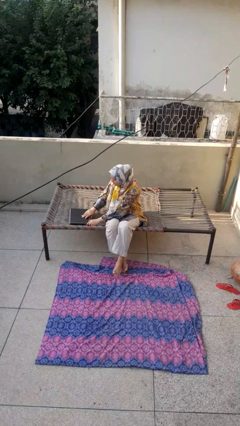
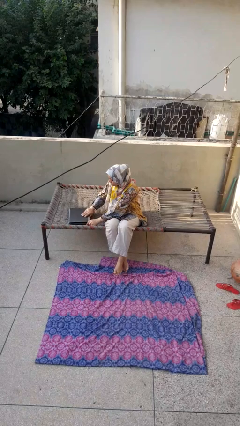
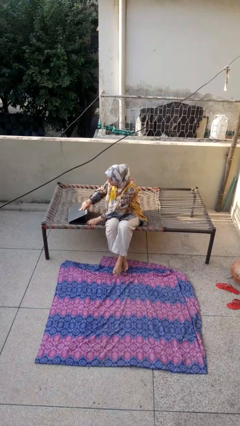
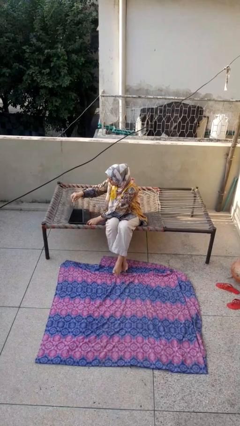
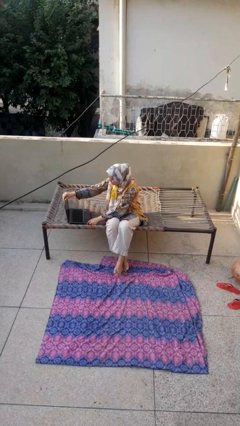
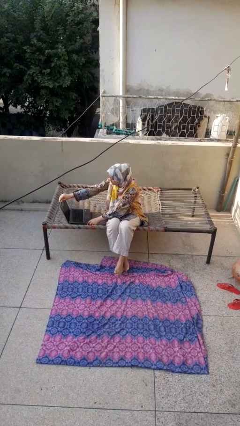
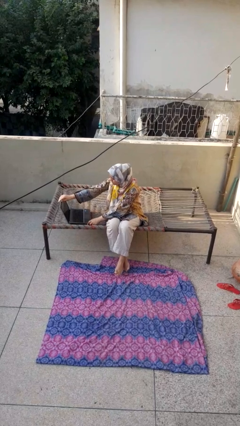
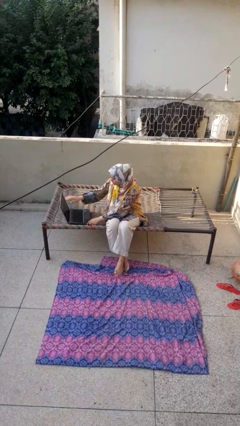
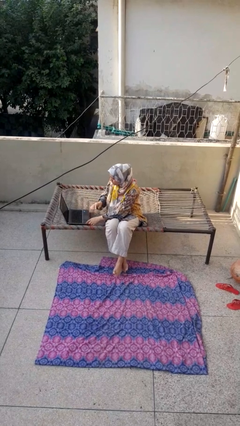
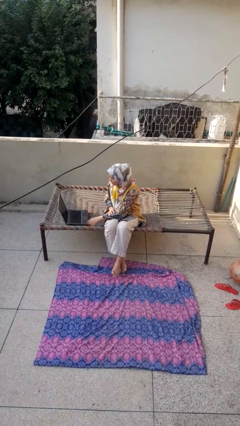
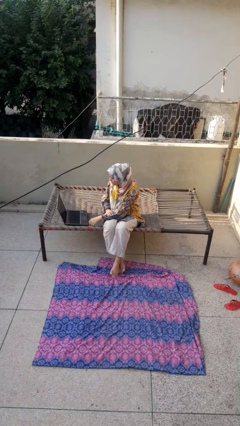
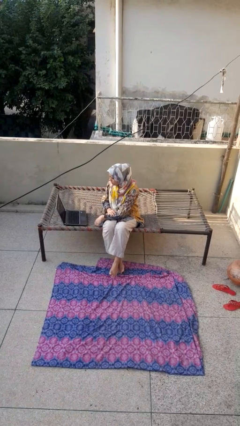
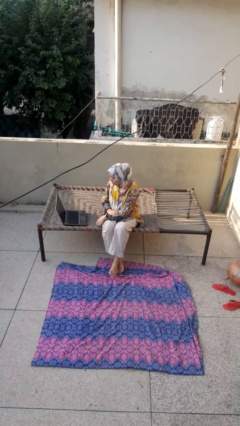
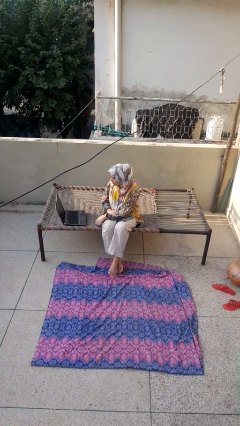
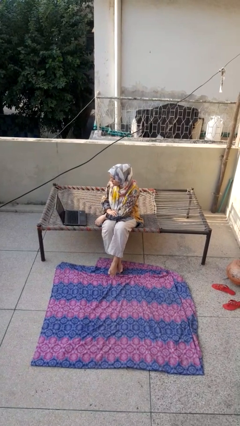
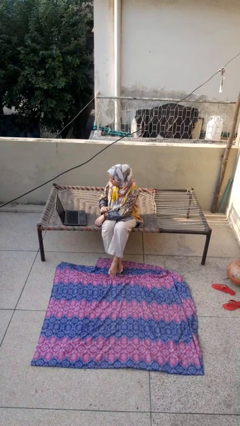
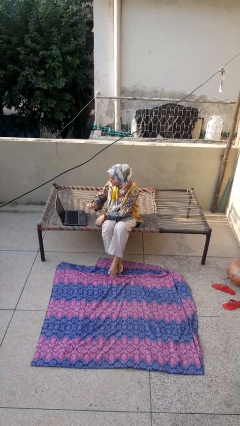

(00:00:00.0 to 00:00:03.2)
person opens laptop

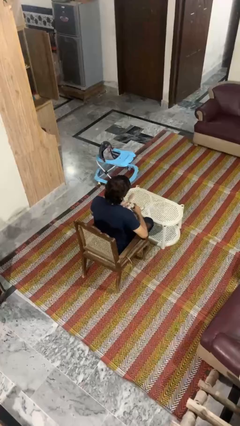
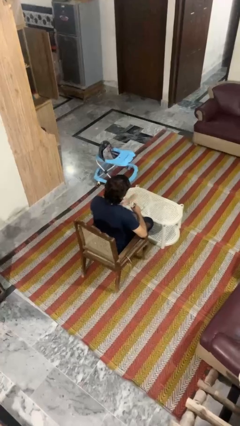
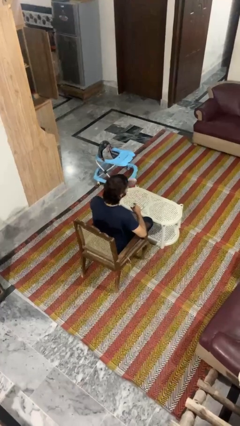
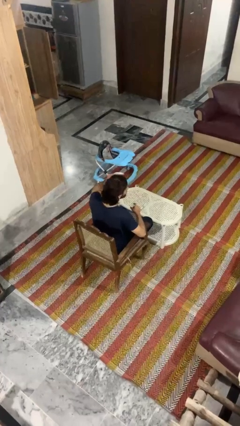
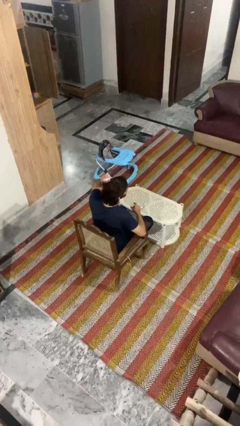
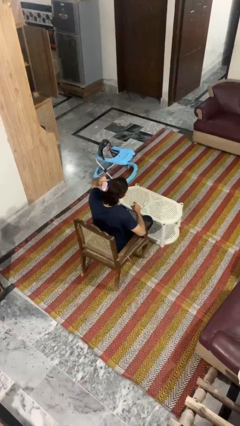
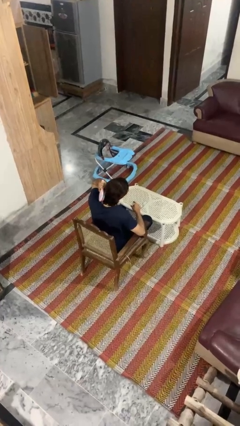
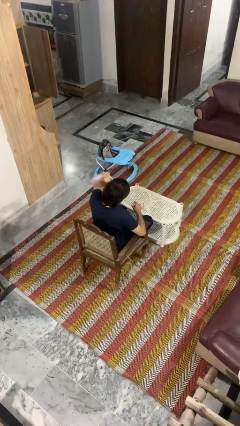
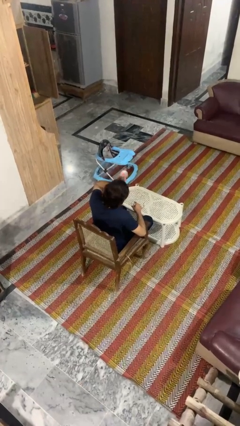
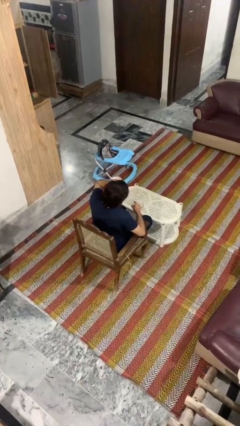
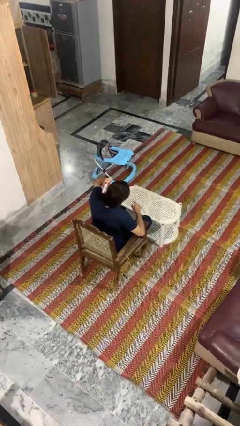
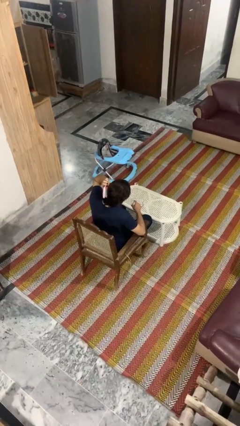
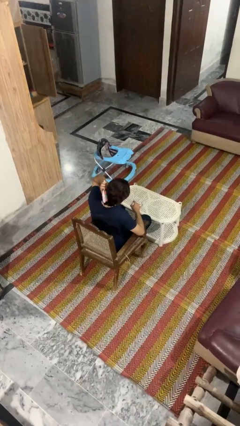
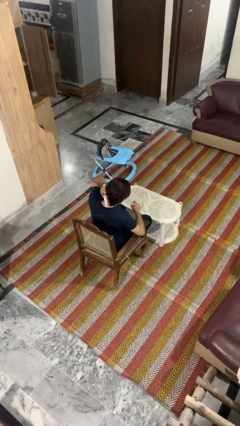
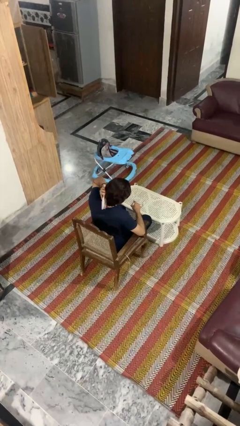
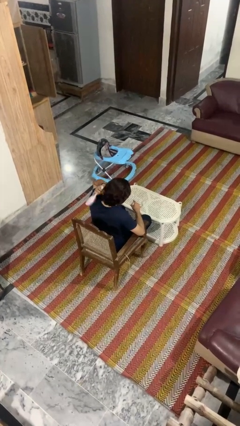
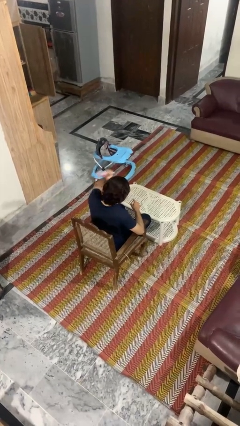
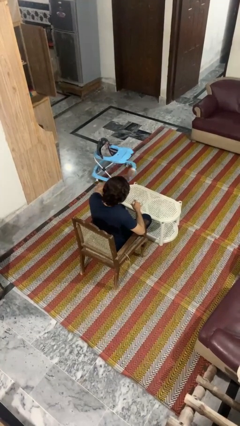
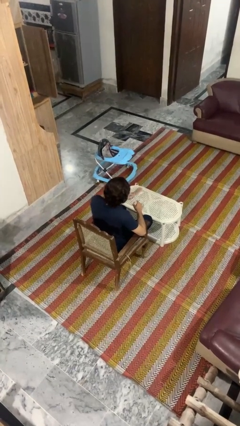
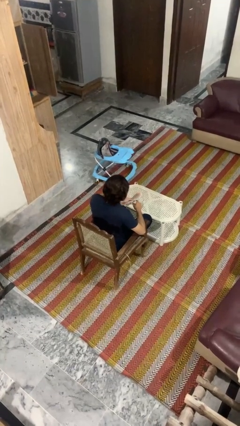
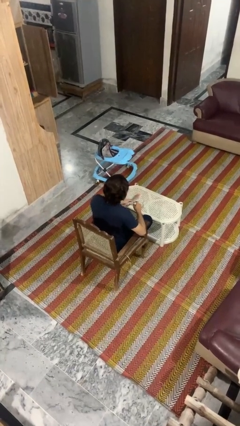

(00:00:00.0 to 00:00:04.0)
person brushes hair

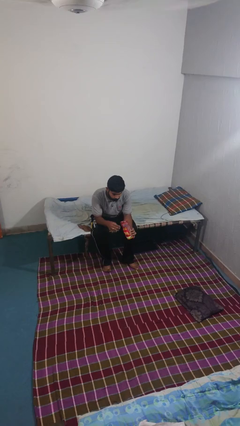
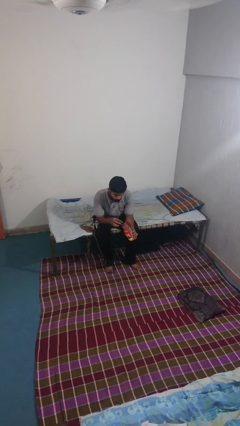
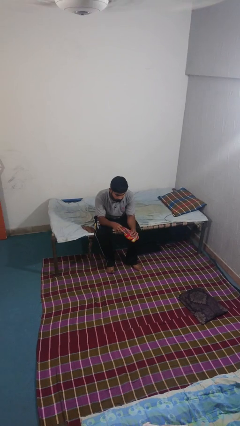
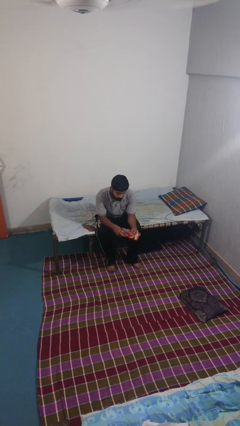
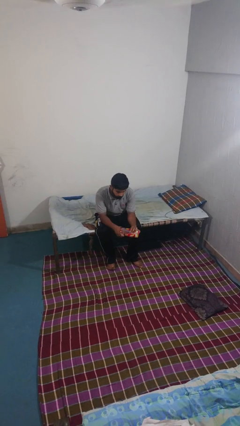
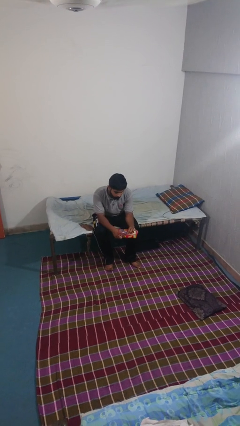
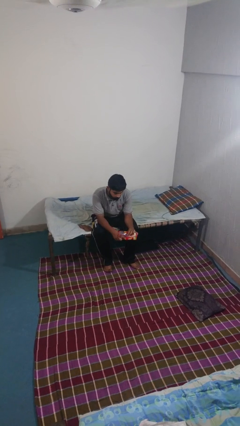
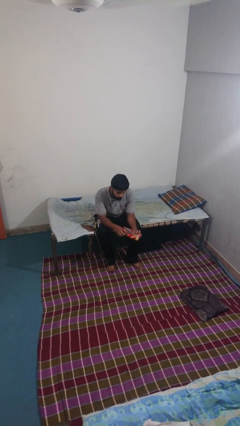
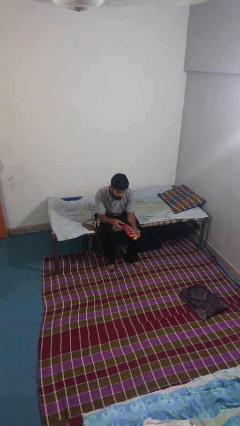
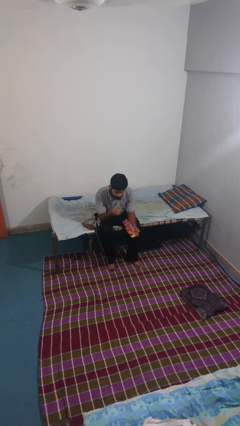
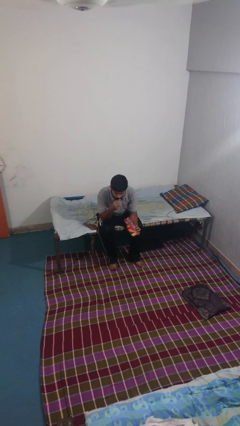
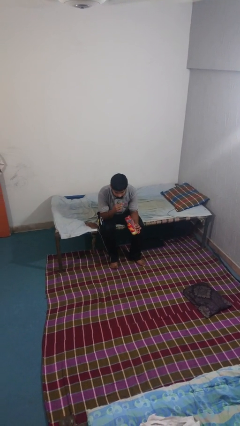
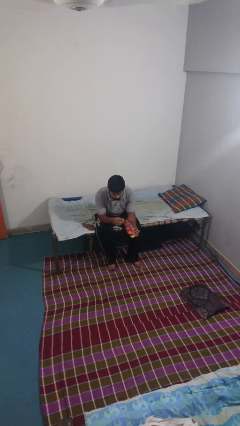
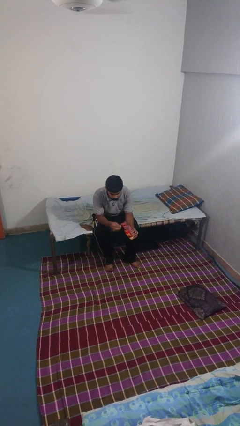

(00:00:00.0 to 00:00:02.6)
person eats snack from bag

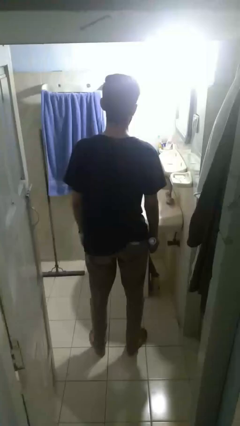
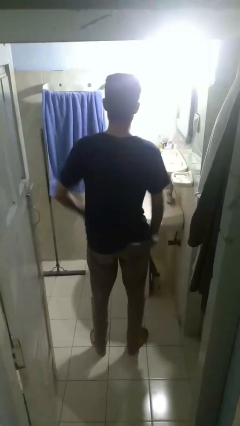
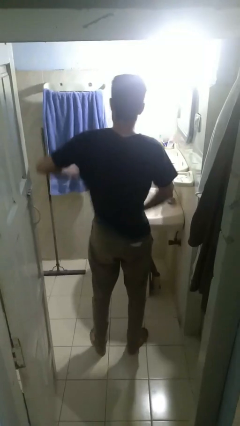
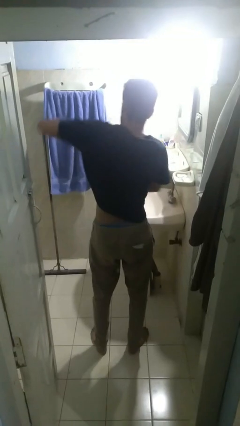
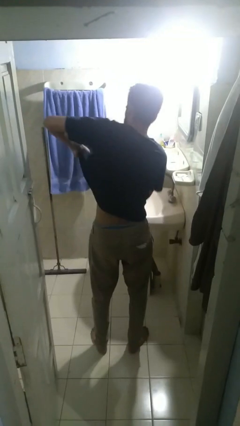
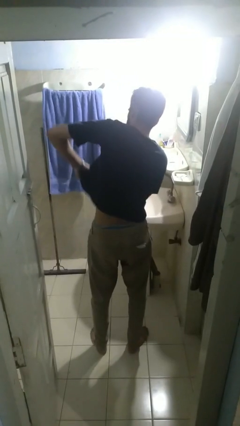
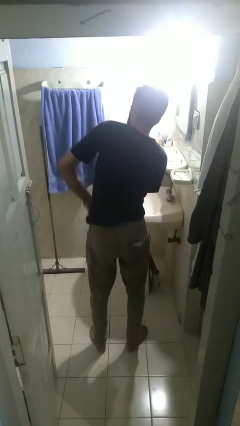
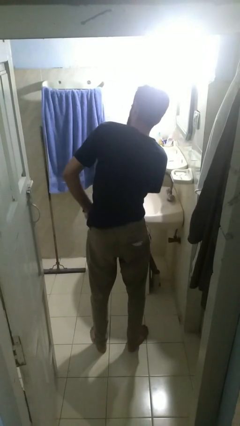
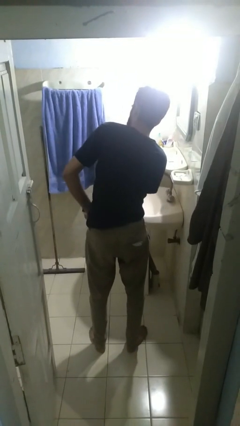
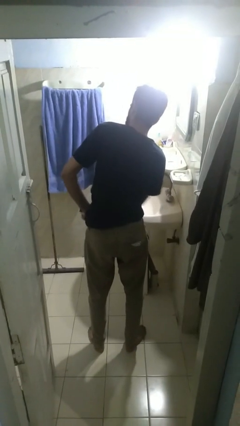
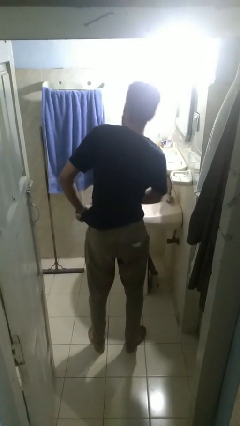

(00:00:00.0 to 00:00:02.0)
person applies deodorant

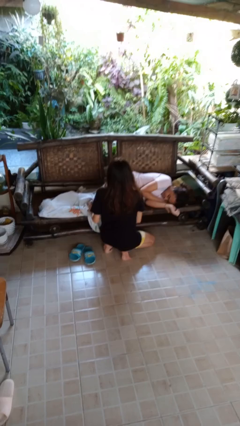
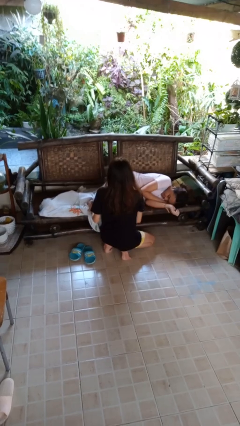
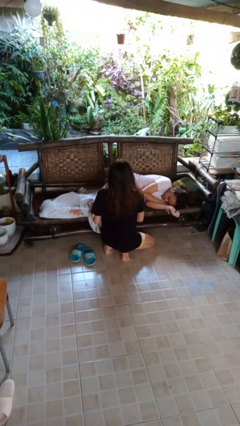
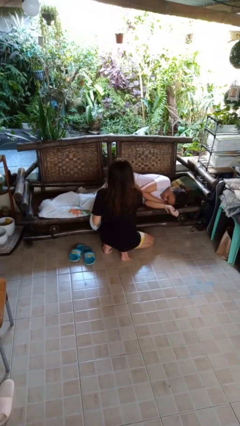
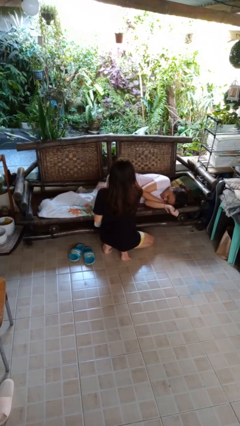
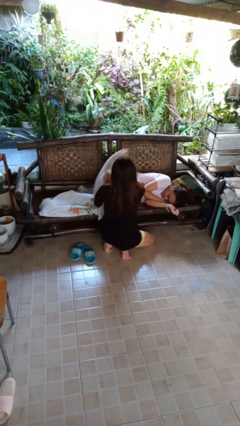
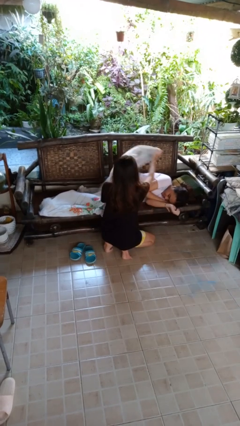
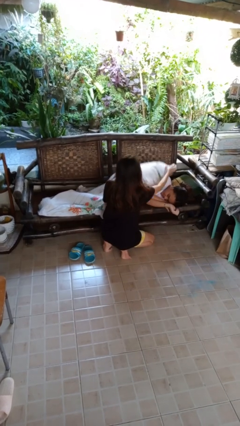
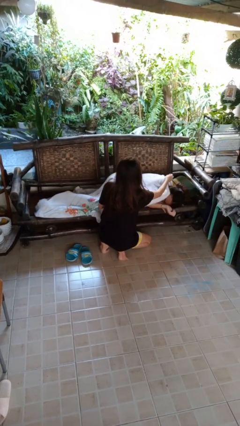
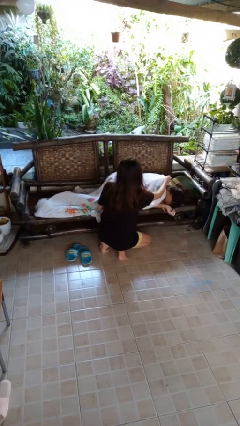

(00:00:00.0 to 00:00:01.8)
person covers friend with blanket

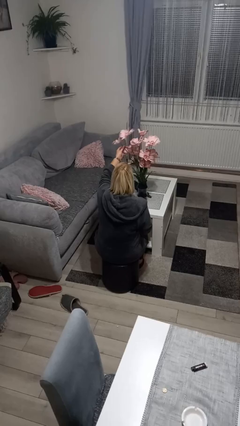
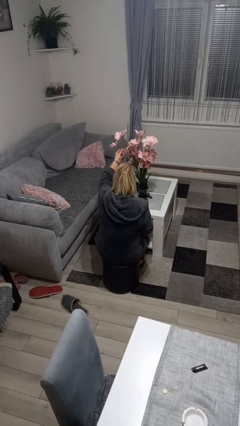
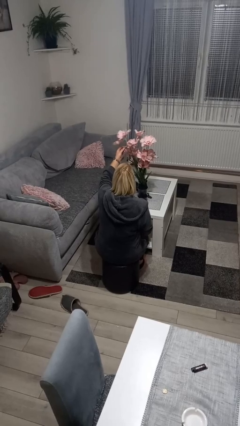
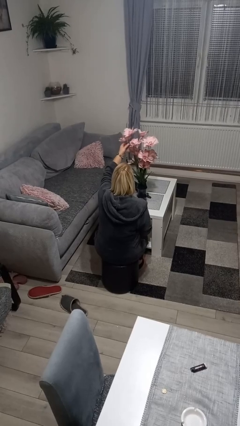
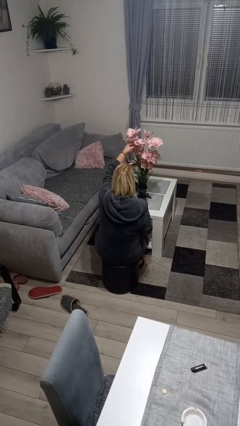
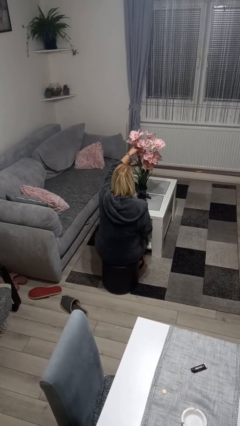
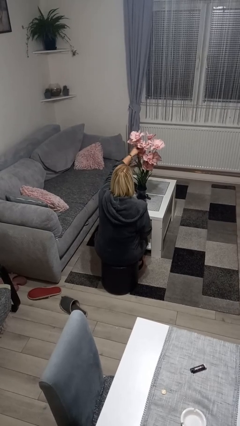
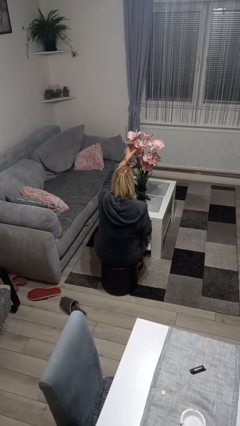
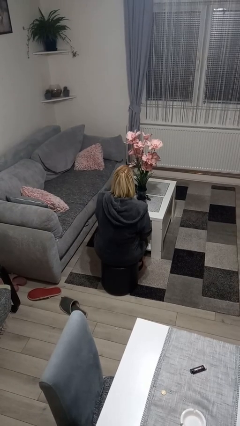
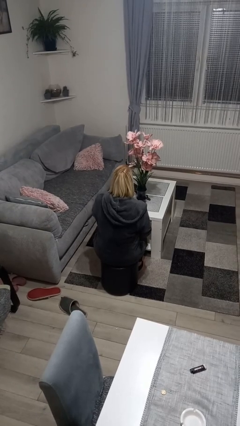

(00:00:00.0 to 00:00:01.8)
person arranges flowers in vase

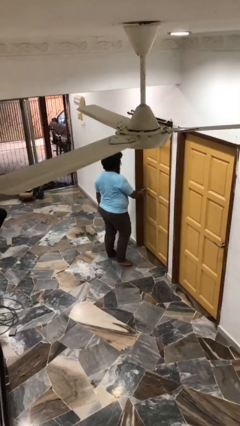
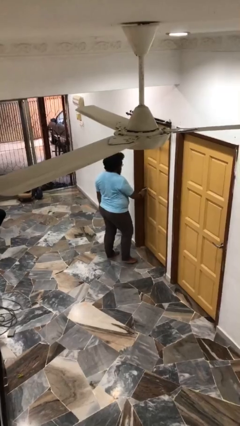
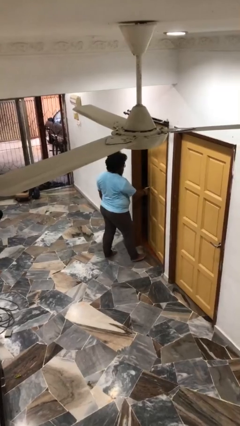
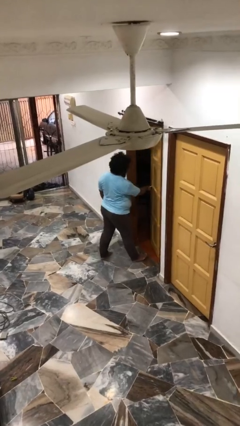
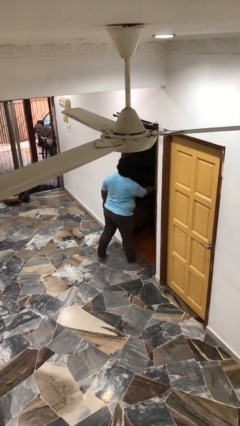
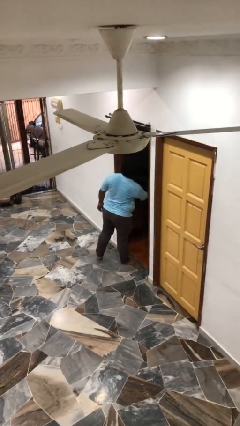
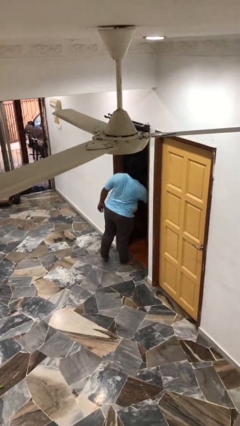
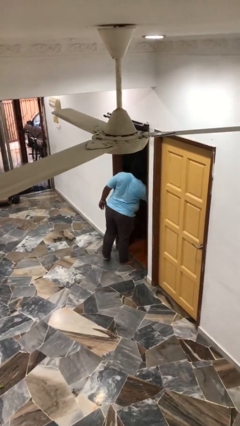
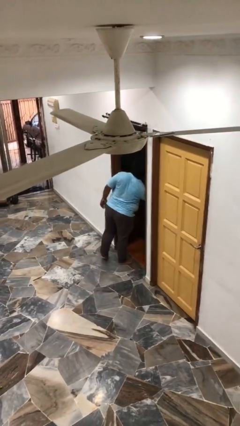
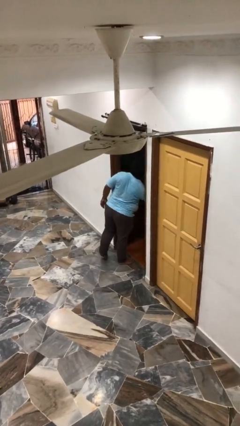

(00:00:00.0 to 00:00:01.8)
person opens facility door
